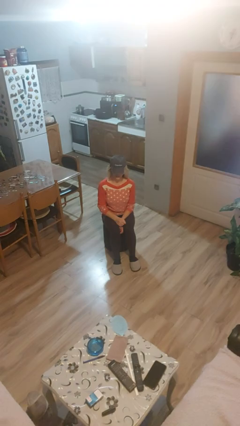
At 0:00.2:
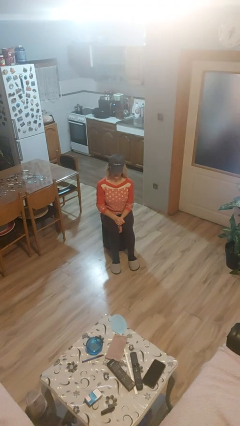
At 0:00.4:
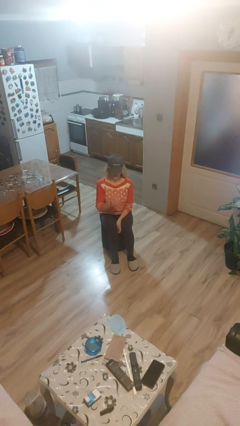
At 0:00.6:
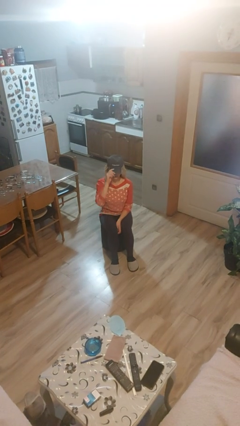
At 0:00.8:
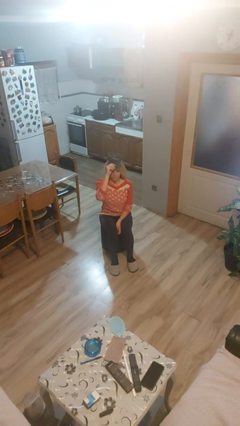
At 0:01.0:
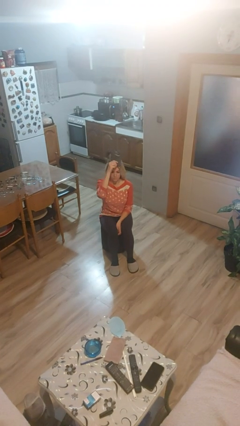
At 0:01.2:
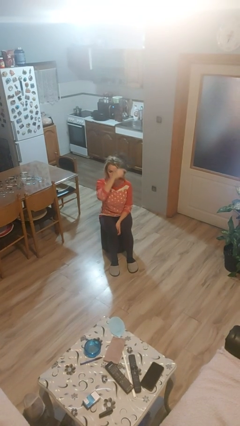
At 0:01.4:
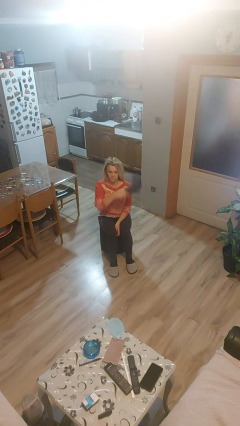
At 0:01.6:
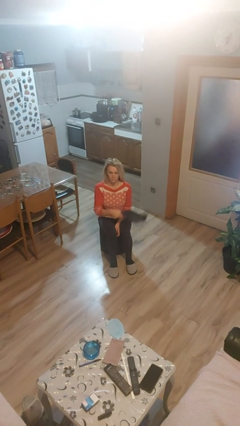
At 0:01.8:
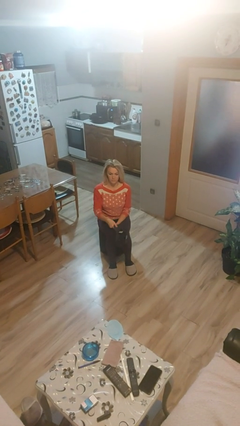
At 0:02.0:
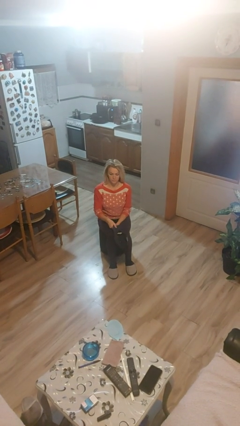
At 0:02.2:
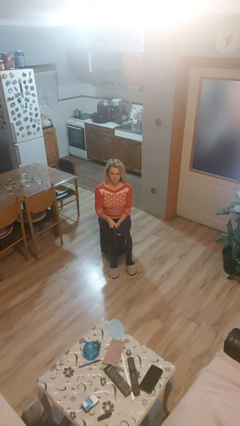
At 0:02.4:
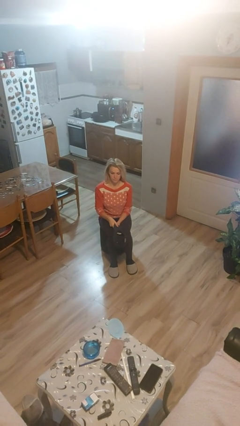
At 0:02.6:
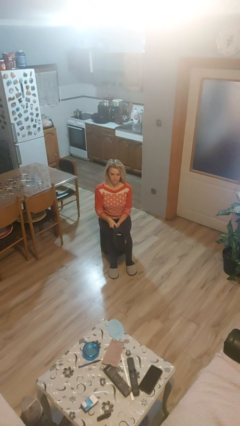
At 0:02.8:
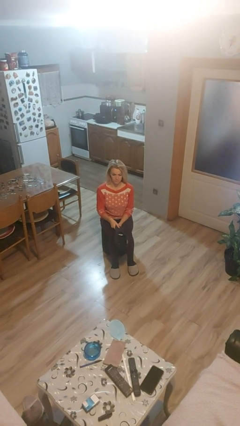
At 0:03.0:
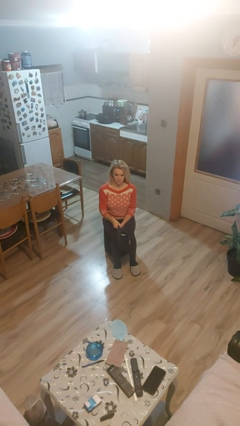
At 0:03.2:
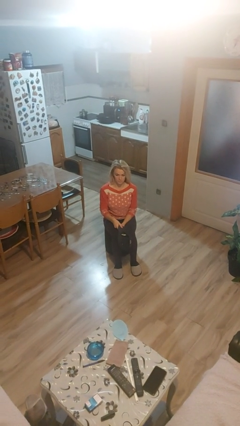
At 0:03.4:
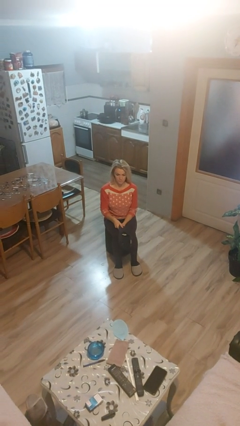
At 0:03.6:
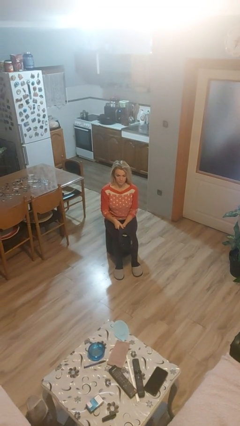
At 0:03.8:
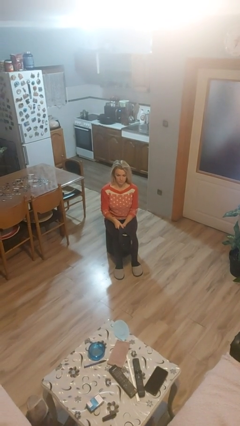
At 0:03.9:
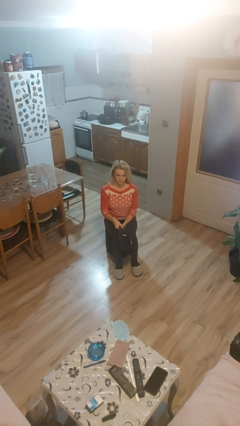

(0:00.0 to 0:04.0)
person takes off hat

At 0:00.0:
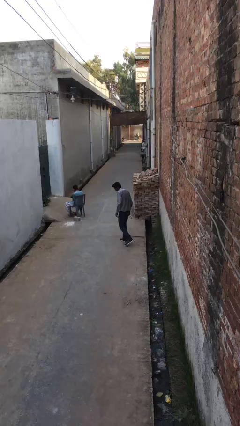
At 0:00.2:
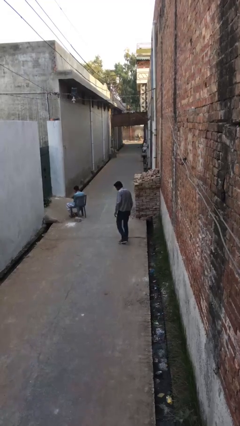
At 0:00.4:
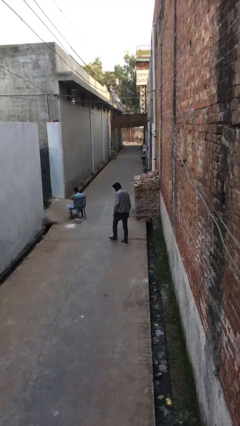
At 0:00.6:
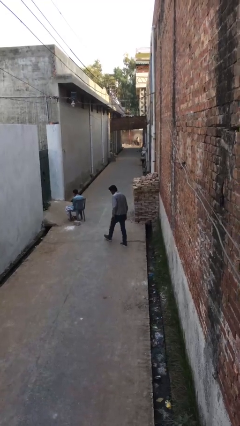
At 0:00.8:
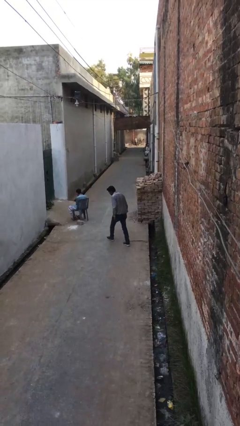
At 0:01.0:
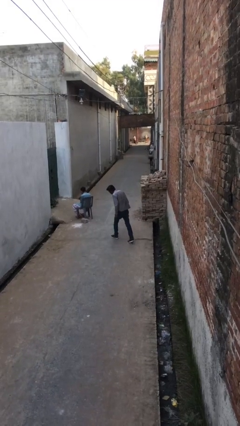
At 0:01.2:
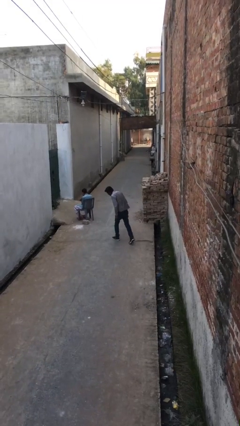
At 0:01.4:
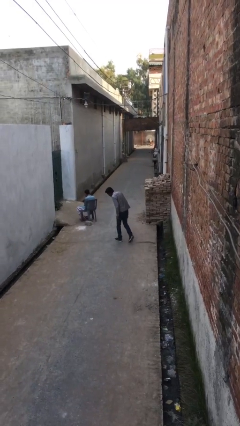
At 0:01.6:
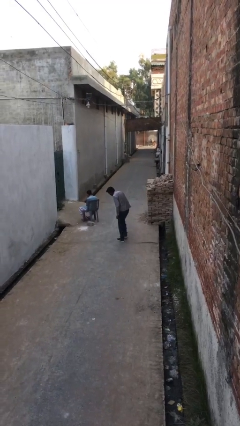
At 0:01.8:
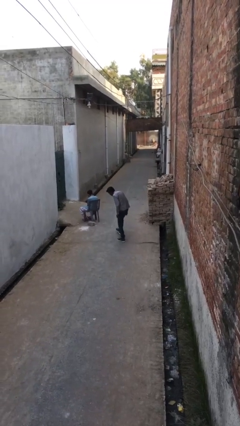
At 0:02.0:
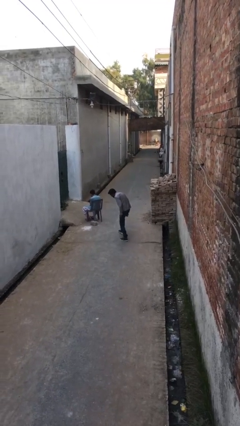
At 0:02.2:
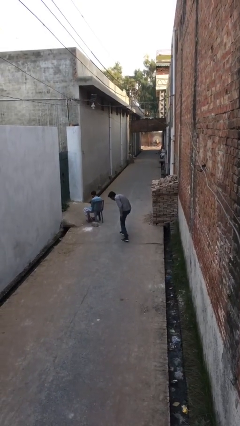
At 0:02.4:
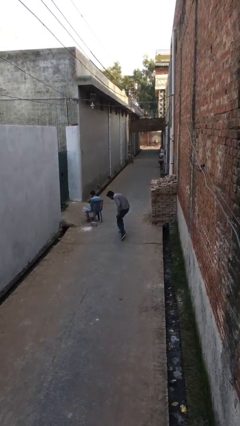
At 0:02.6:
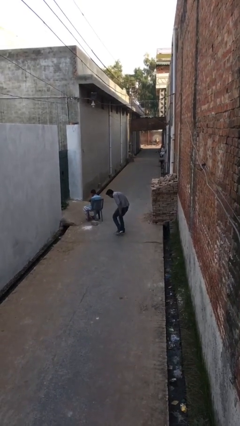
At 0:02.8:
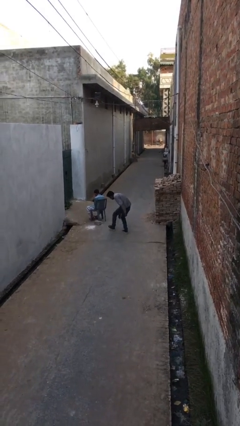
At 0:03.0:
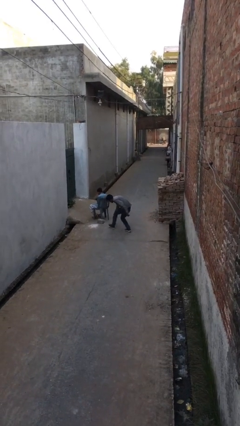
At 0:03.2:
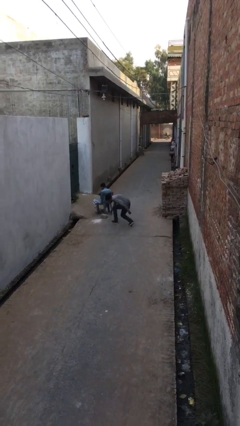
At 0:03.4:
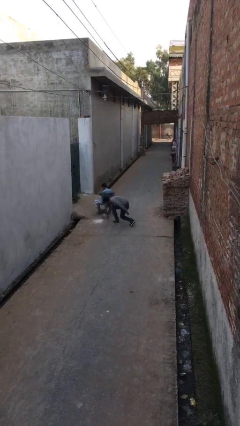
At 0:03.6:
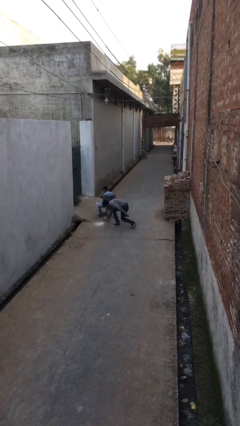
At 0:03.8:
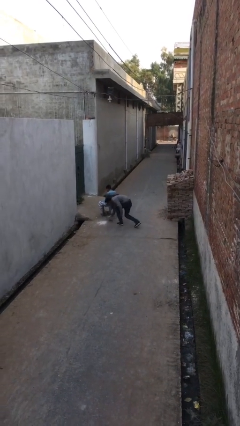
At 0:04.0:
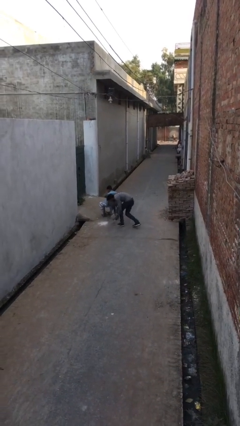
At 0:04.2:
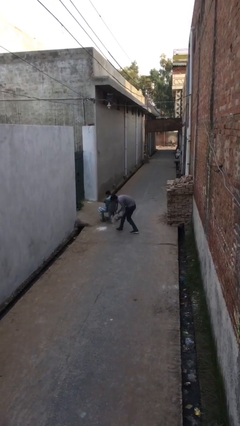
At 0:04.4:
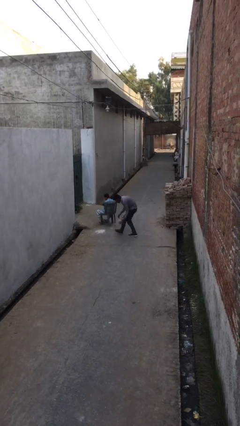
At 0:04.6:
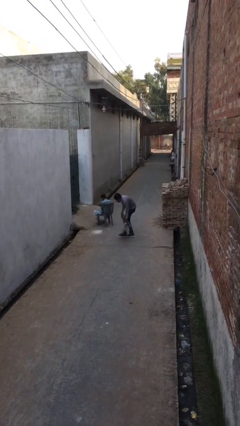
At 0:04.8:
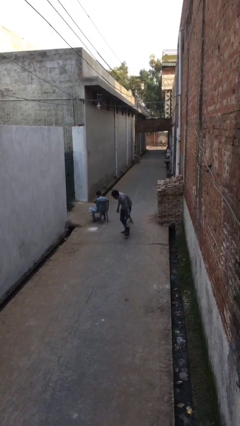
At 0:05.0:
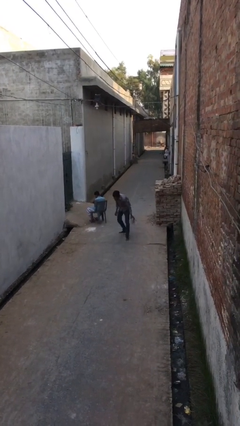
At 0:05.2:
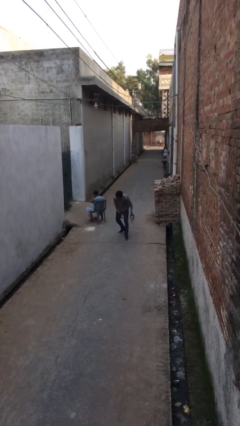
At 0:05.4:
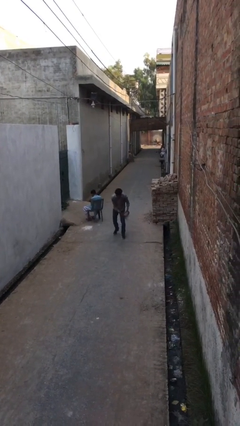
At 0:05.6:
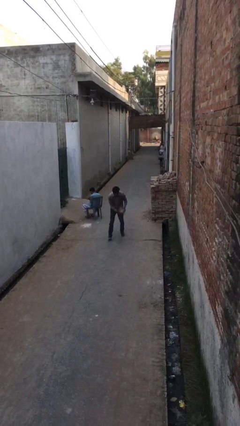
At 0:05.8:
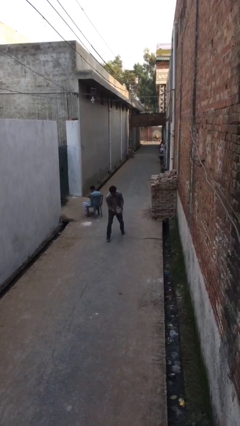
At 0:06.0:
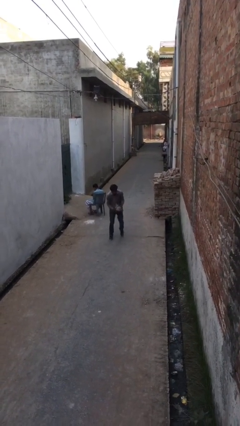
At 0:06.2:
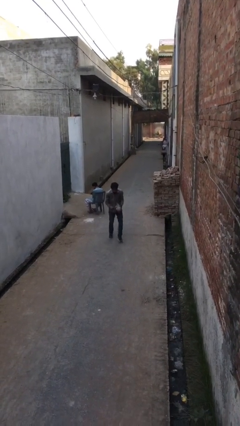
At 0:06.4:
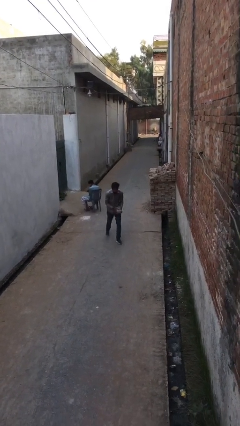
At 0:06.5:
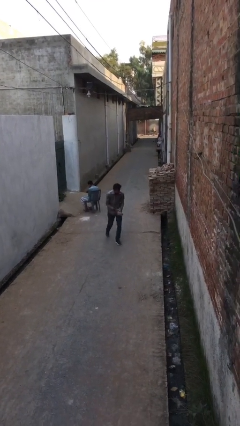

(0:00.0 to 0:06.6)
person steals object from person

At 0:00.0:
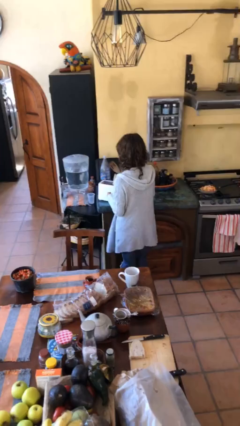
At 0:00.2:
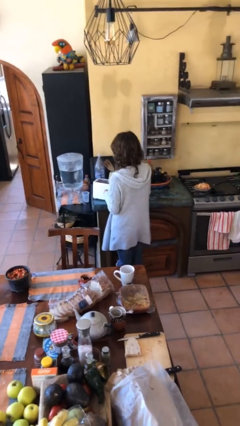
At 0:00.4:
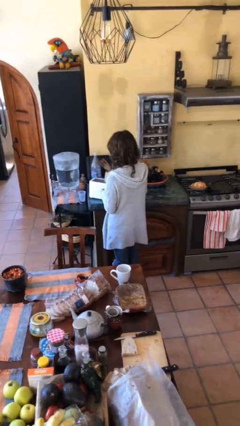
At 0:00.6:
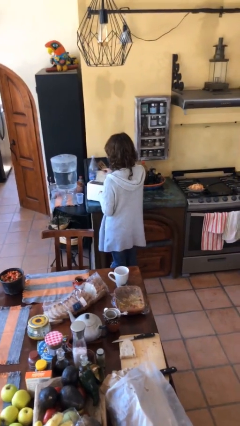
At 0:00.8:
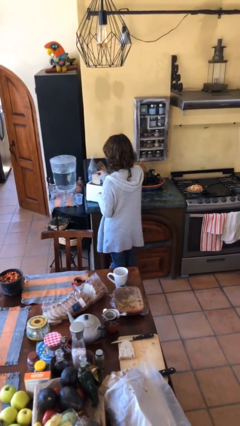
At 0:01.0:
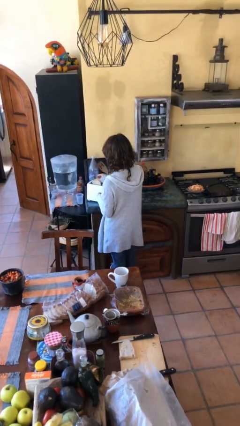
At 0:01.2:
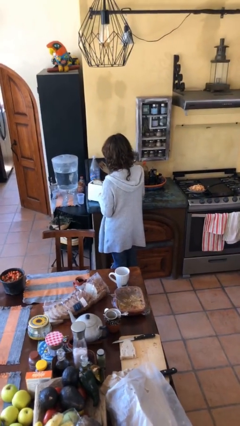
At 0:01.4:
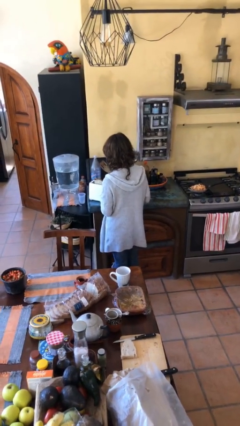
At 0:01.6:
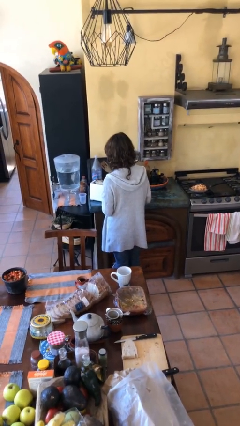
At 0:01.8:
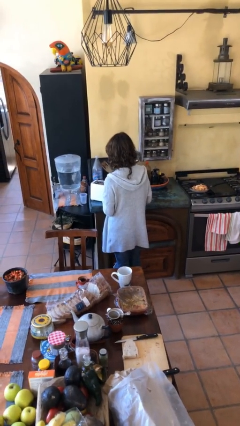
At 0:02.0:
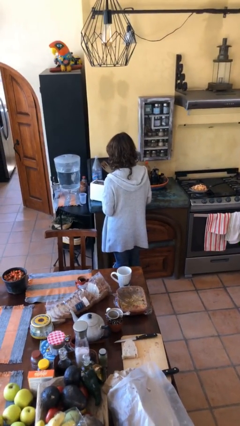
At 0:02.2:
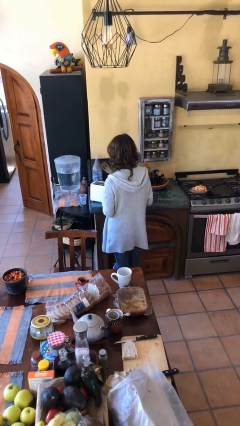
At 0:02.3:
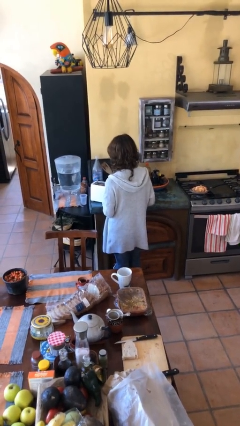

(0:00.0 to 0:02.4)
person puts object into toaster
